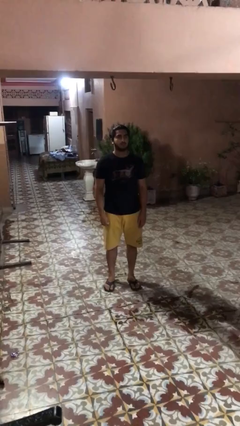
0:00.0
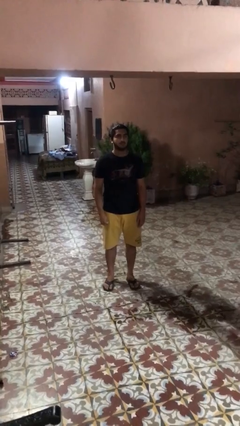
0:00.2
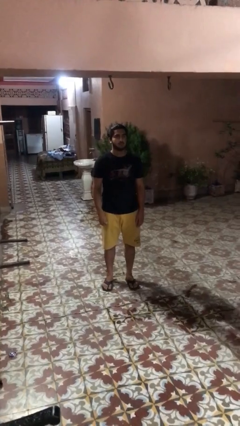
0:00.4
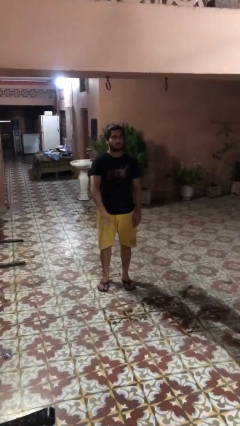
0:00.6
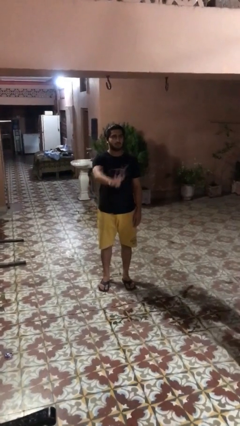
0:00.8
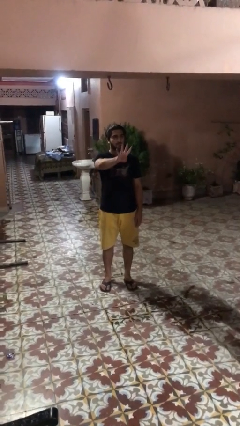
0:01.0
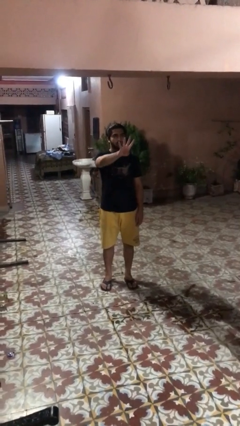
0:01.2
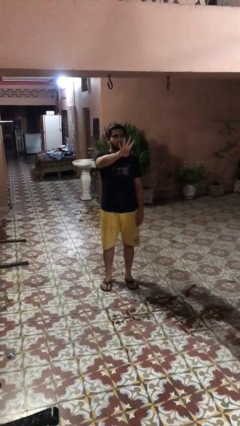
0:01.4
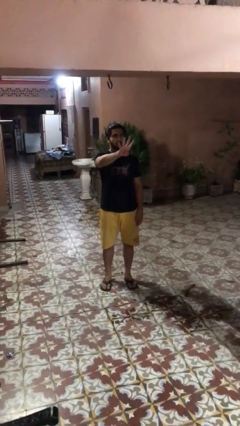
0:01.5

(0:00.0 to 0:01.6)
person gestures number four

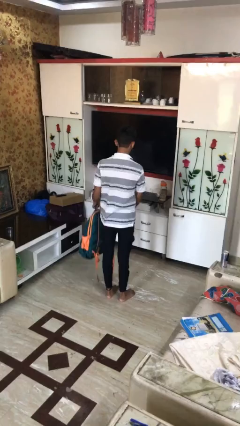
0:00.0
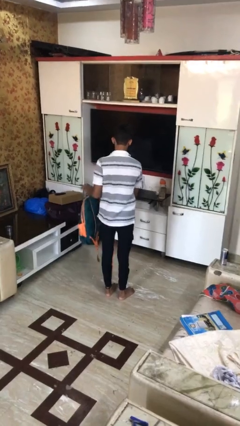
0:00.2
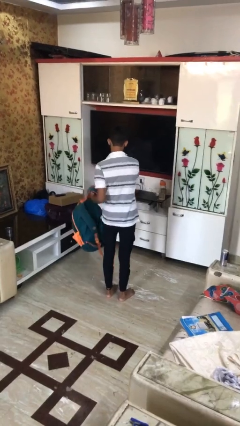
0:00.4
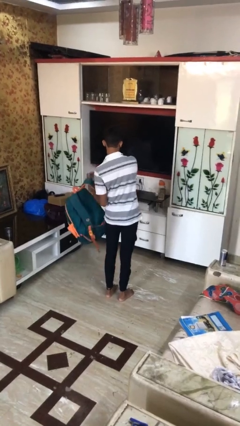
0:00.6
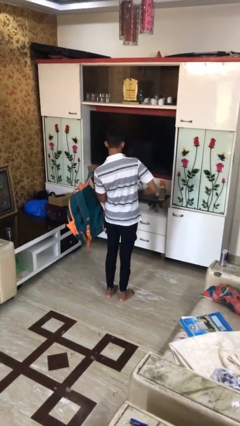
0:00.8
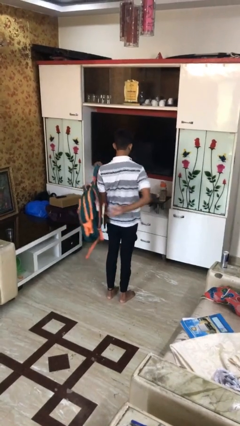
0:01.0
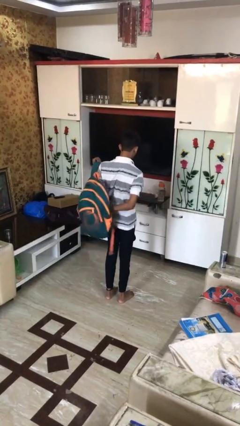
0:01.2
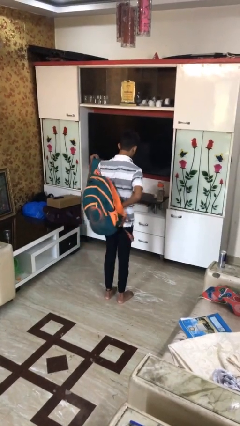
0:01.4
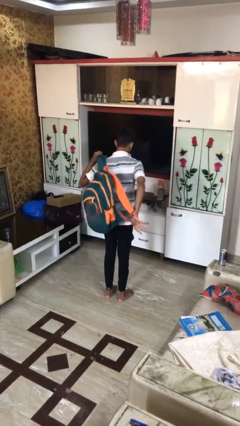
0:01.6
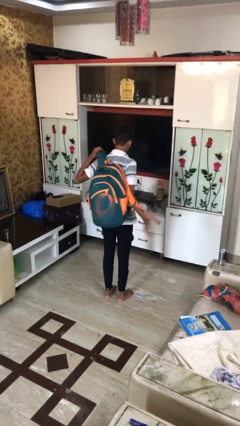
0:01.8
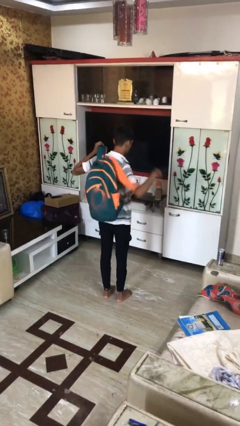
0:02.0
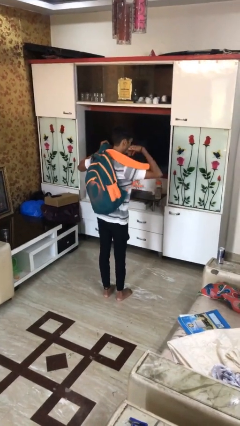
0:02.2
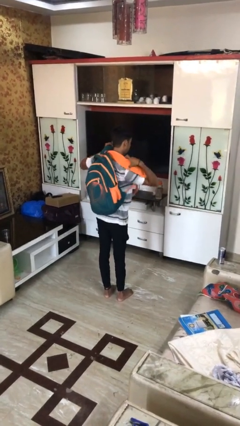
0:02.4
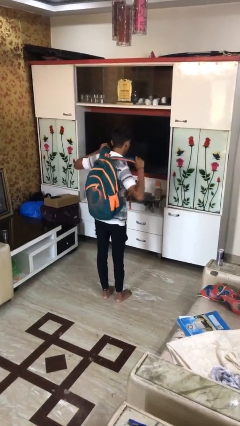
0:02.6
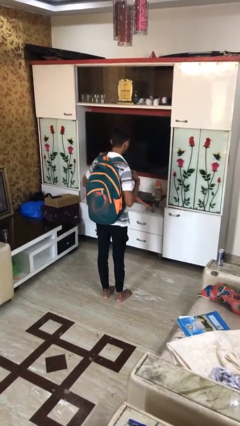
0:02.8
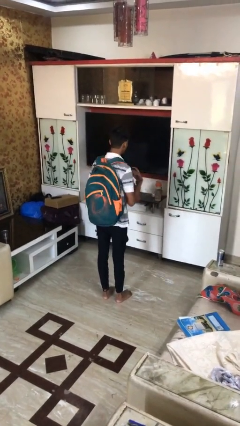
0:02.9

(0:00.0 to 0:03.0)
person puts on backpack

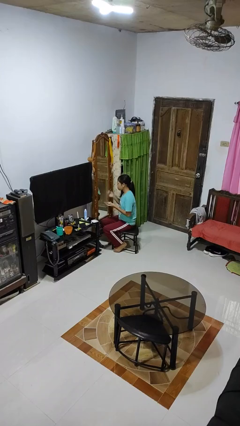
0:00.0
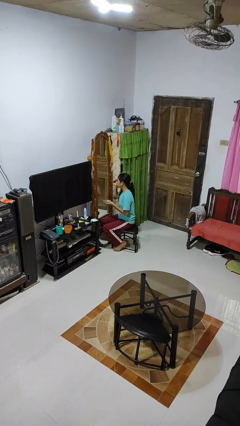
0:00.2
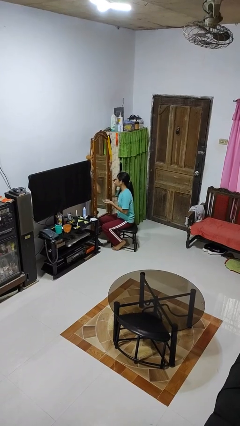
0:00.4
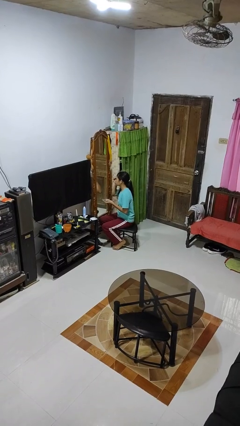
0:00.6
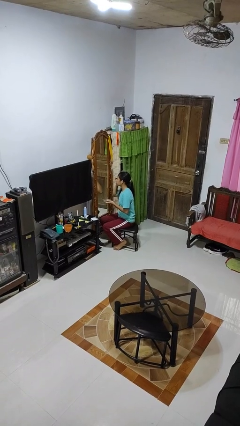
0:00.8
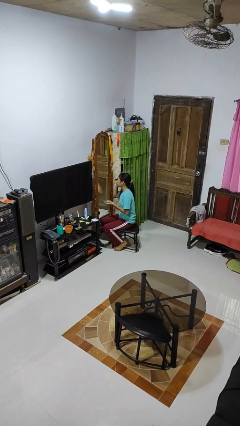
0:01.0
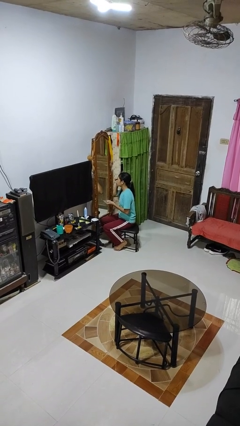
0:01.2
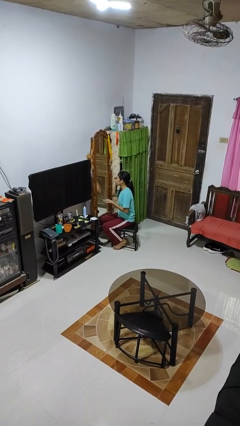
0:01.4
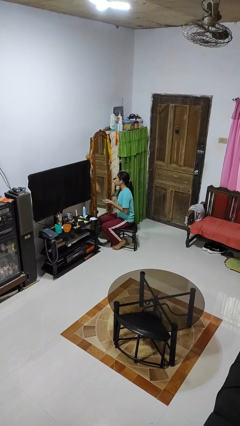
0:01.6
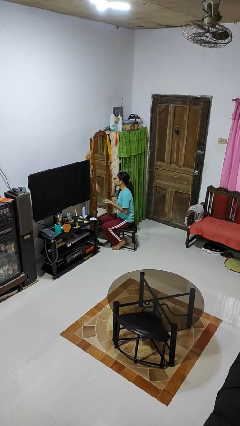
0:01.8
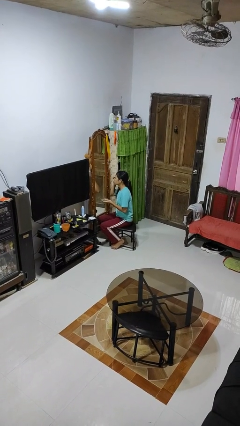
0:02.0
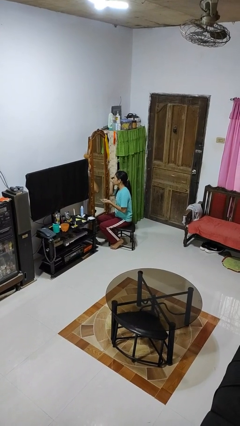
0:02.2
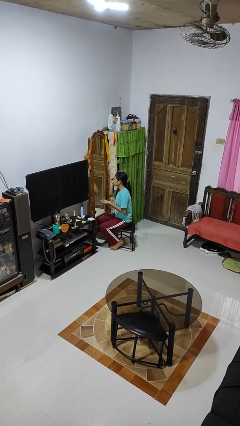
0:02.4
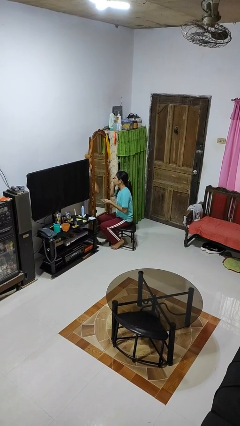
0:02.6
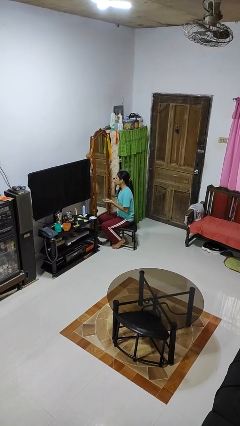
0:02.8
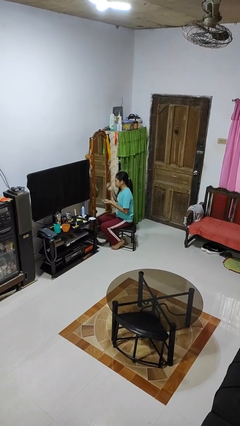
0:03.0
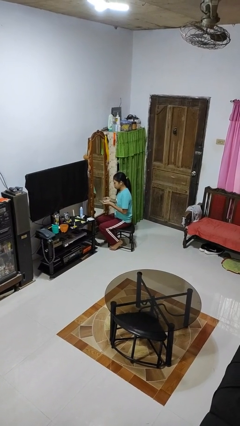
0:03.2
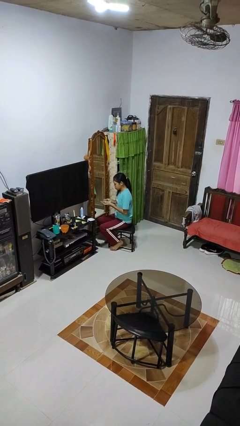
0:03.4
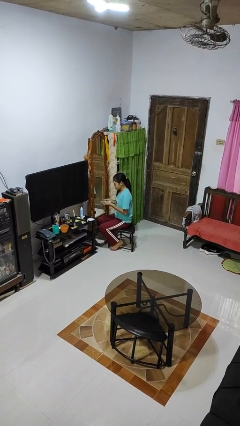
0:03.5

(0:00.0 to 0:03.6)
person applies eye makeup

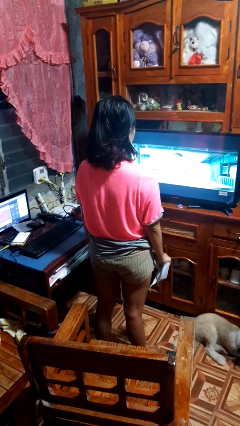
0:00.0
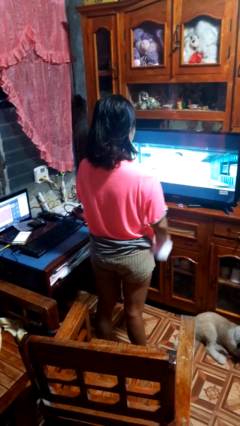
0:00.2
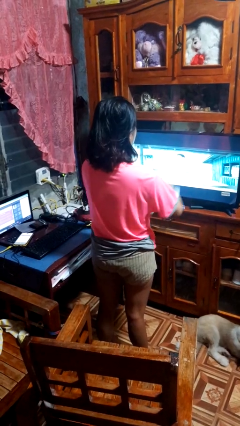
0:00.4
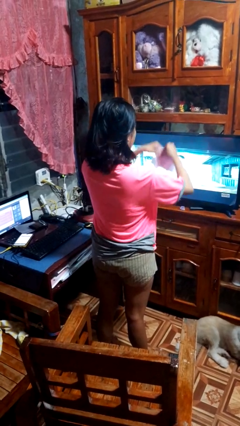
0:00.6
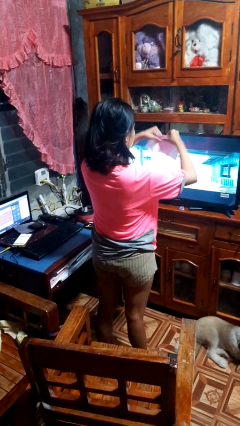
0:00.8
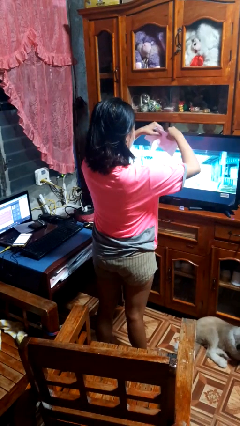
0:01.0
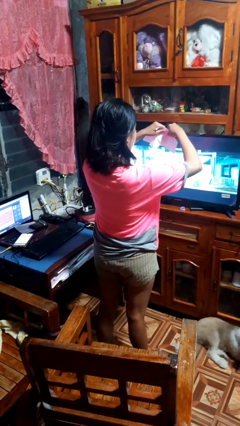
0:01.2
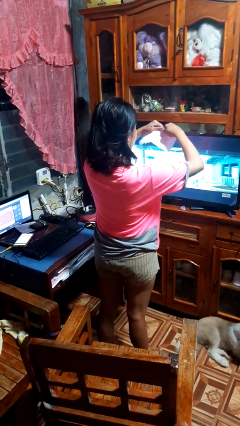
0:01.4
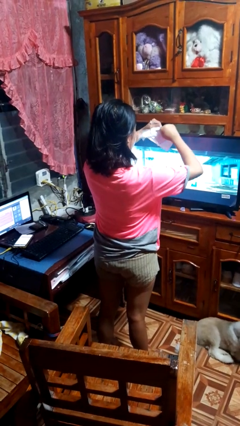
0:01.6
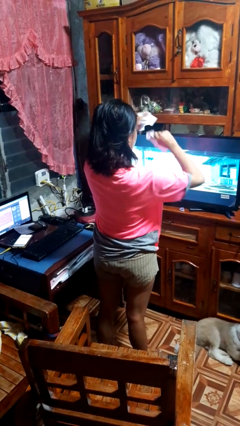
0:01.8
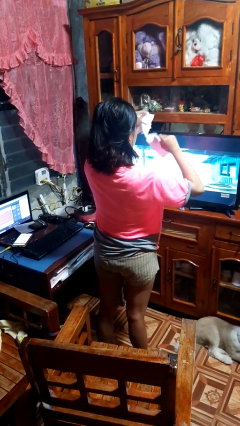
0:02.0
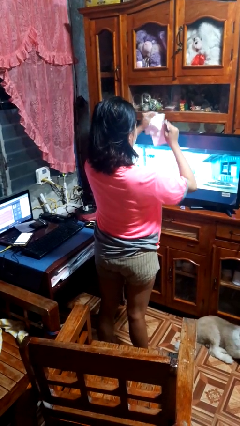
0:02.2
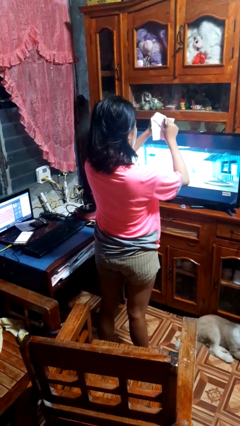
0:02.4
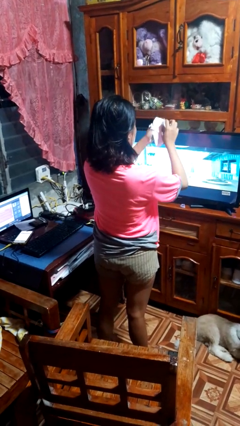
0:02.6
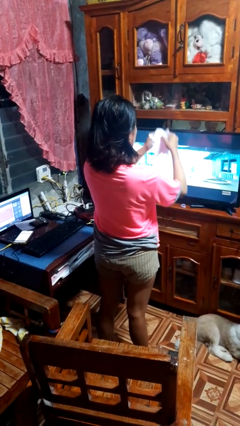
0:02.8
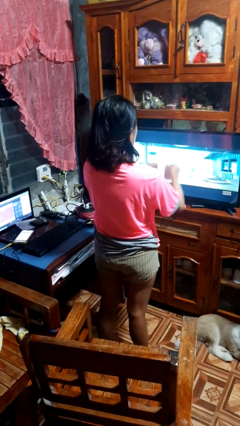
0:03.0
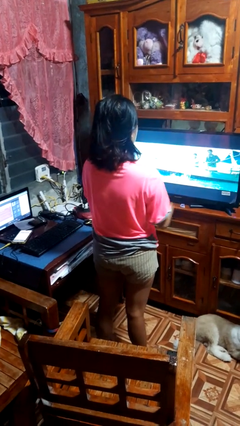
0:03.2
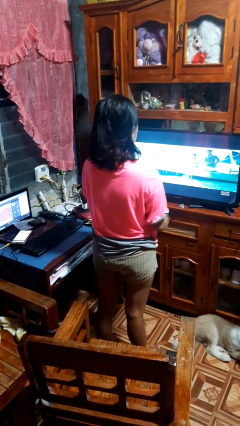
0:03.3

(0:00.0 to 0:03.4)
person tears paper

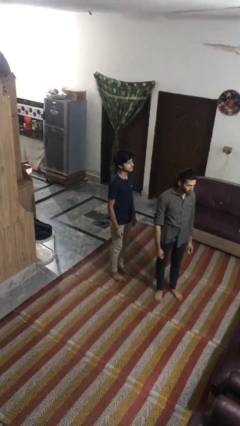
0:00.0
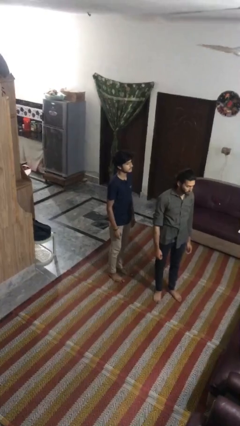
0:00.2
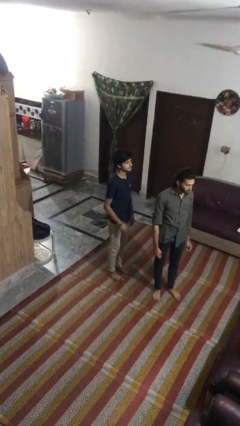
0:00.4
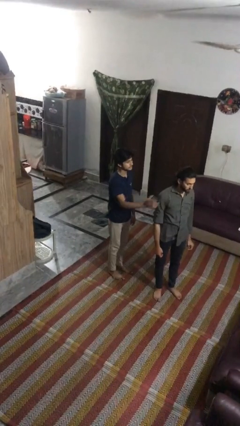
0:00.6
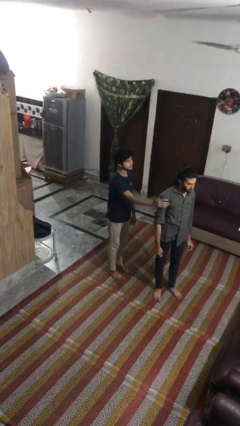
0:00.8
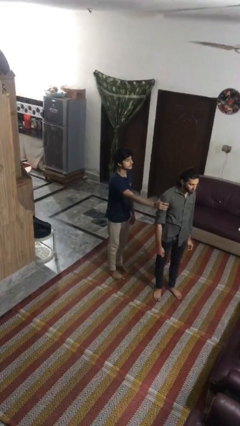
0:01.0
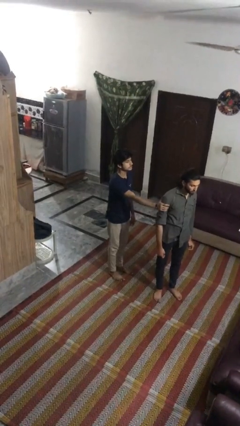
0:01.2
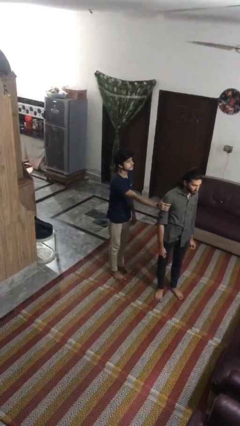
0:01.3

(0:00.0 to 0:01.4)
person grabs person by shoulder

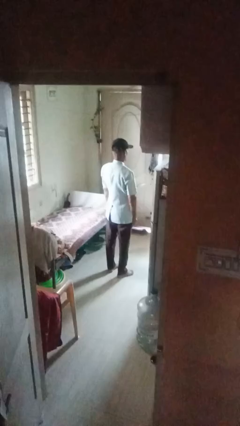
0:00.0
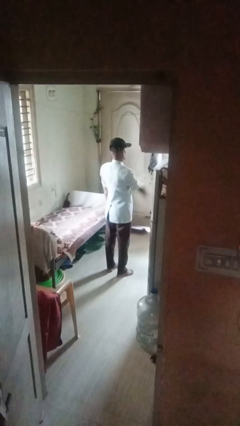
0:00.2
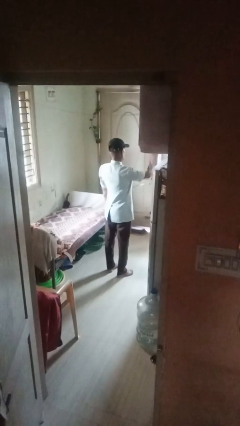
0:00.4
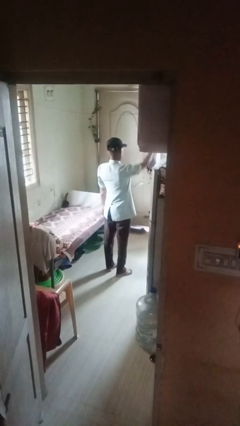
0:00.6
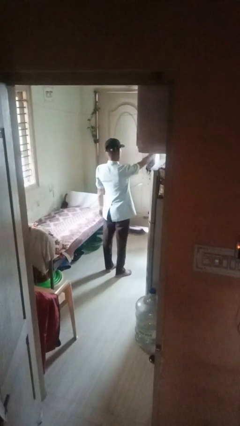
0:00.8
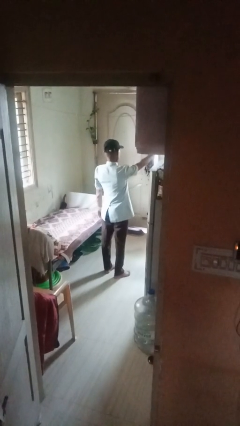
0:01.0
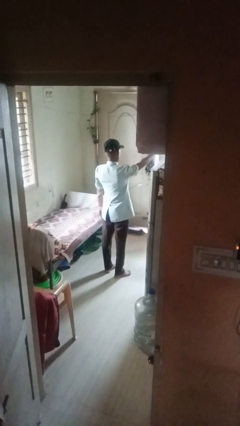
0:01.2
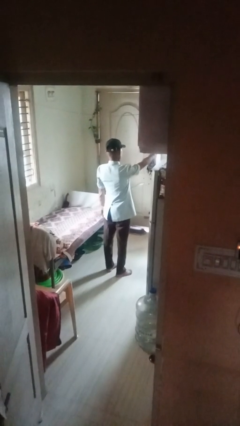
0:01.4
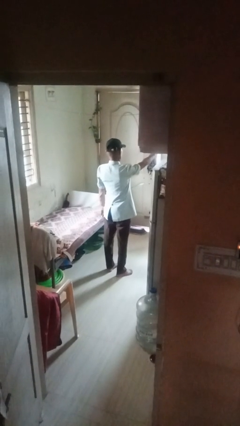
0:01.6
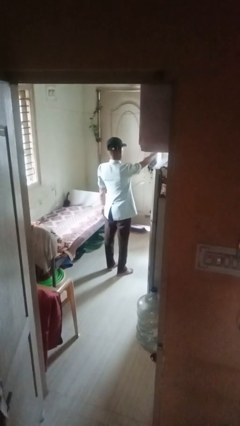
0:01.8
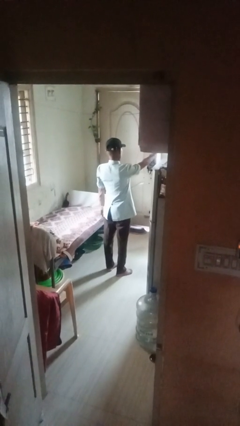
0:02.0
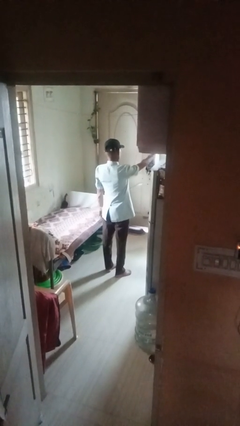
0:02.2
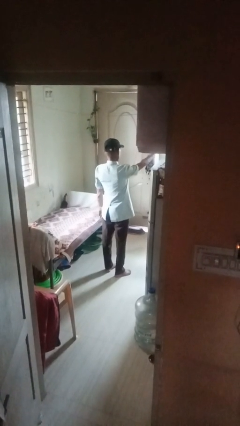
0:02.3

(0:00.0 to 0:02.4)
person gestures stop

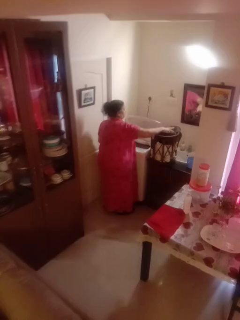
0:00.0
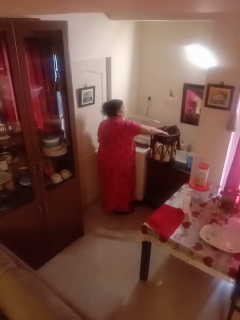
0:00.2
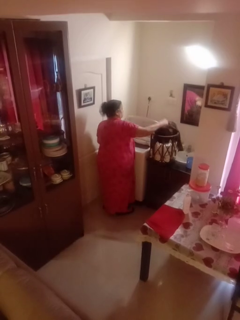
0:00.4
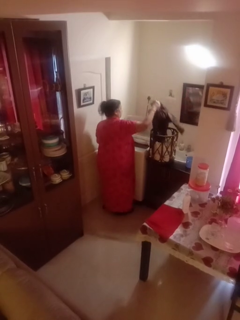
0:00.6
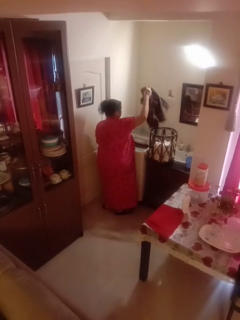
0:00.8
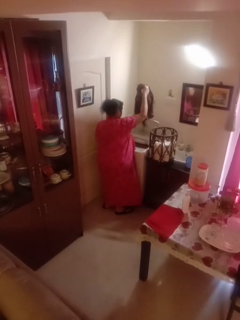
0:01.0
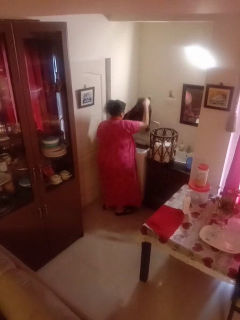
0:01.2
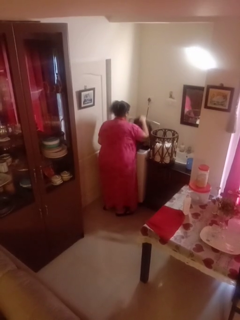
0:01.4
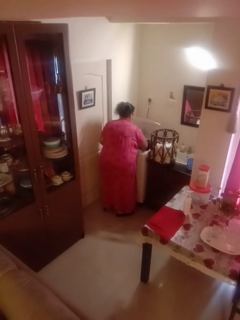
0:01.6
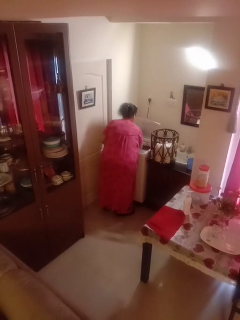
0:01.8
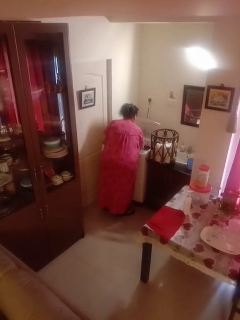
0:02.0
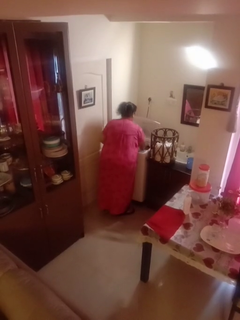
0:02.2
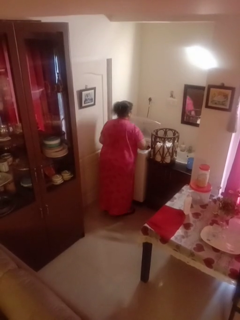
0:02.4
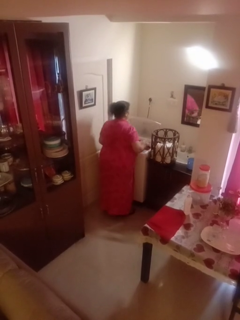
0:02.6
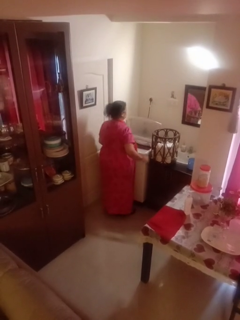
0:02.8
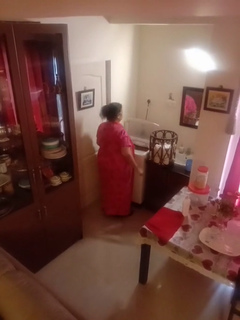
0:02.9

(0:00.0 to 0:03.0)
person loads dryer
